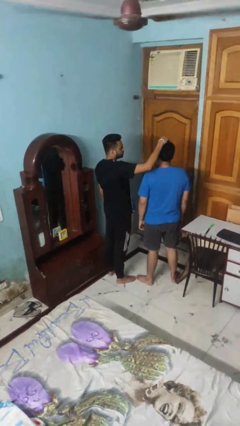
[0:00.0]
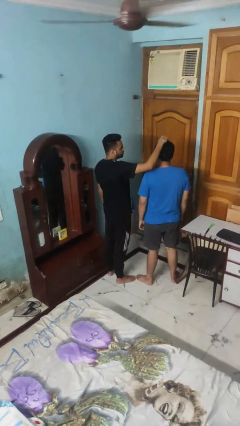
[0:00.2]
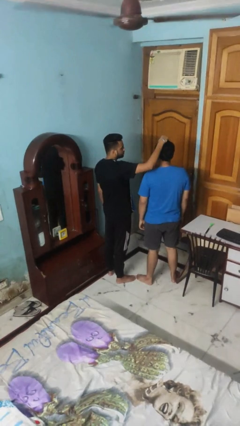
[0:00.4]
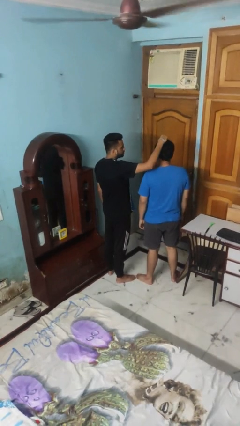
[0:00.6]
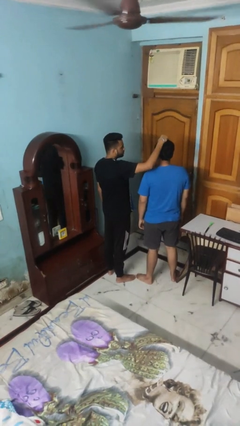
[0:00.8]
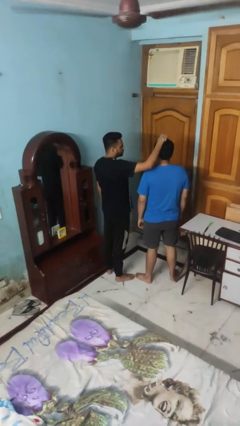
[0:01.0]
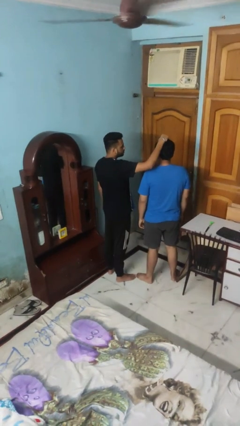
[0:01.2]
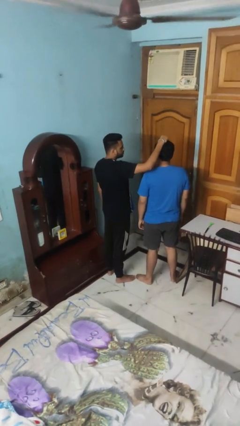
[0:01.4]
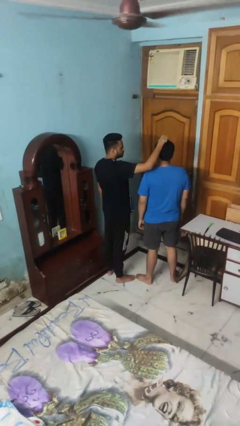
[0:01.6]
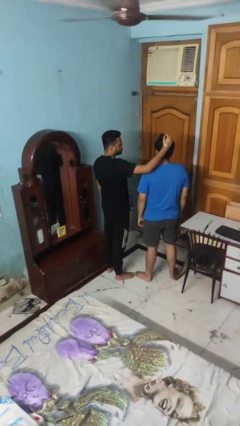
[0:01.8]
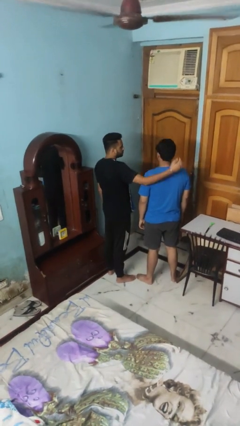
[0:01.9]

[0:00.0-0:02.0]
person grabs person by hair

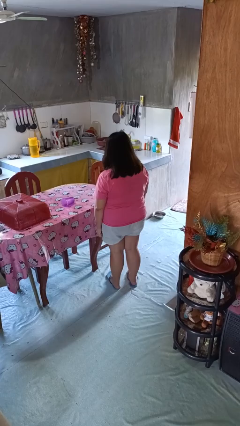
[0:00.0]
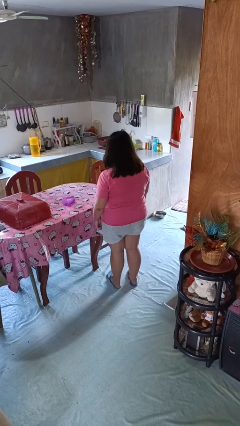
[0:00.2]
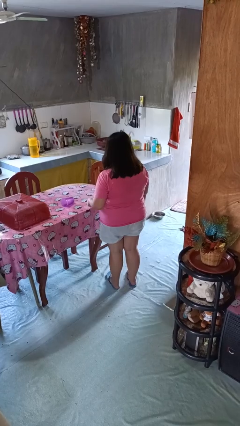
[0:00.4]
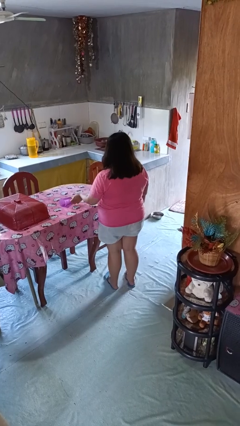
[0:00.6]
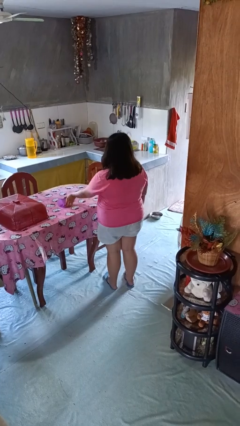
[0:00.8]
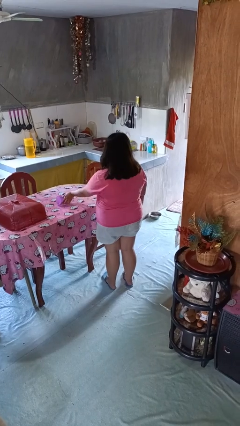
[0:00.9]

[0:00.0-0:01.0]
person sets upright glass

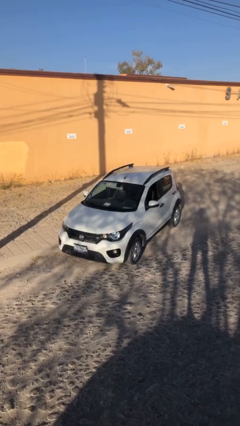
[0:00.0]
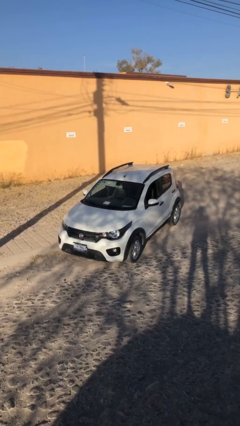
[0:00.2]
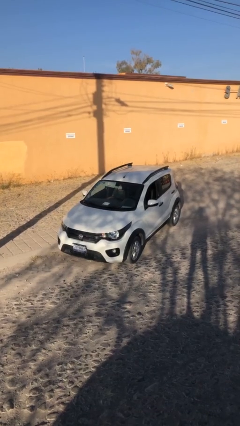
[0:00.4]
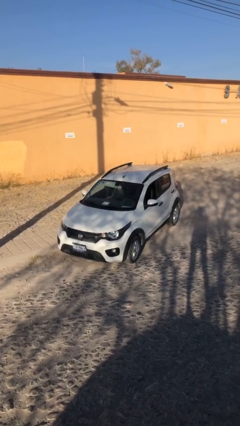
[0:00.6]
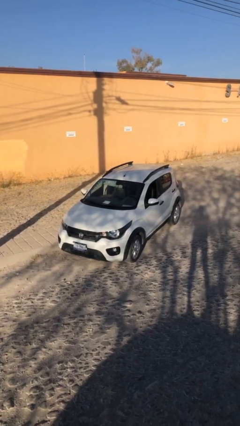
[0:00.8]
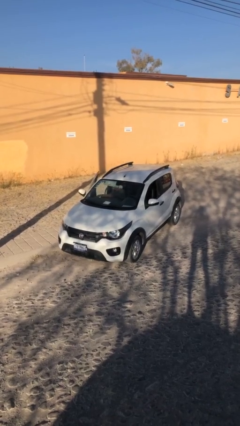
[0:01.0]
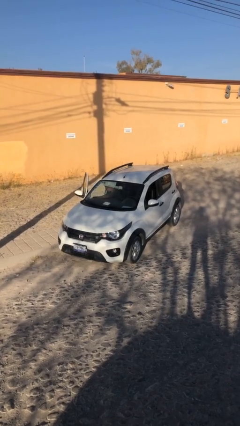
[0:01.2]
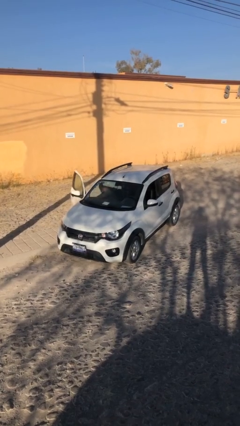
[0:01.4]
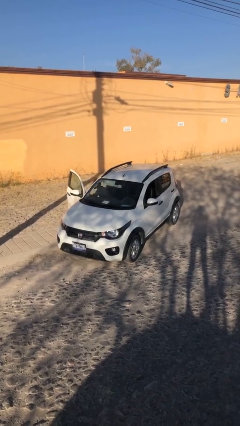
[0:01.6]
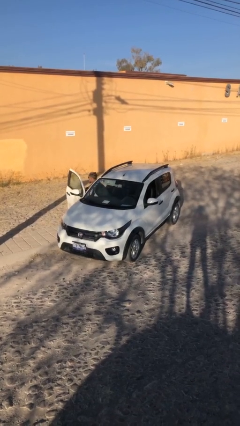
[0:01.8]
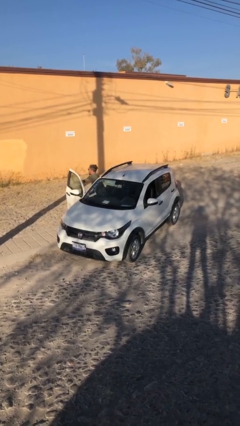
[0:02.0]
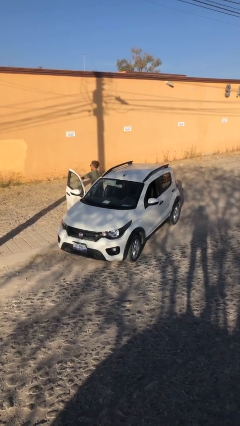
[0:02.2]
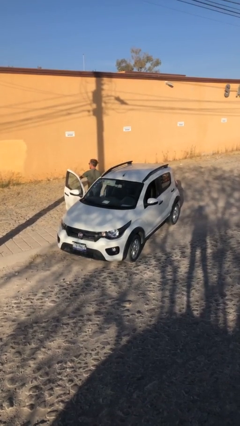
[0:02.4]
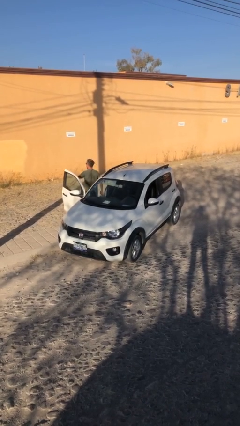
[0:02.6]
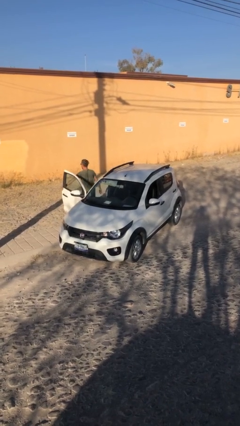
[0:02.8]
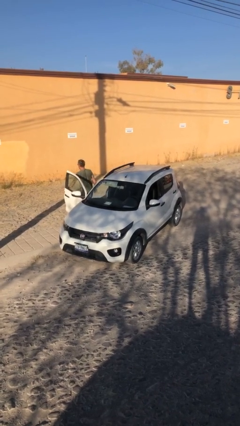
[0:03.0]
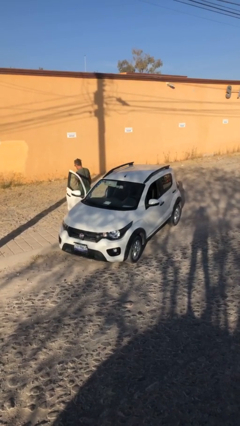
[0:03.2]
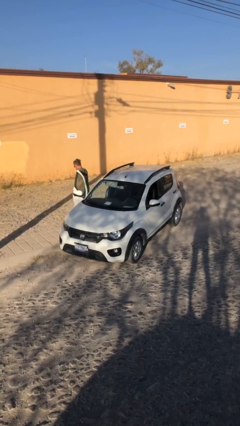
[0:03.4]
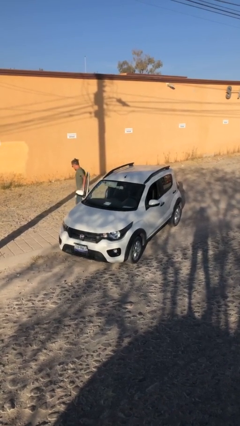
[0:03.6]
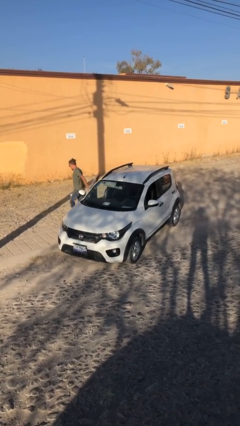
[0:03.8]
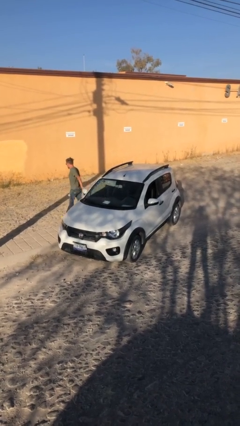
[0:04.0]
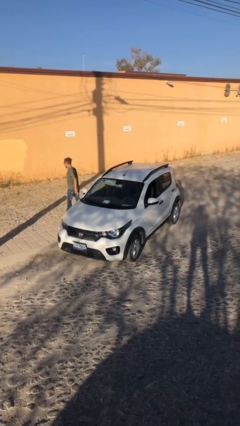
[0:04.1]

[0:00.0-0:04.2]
car drops off person

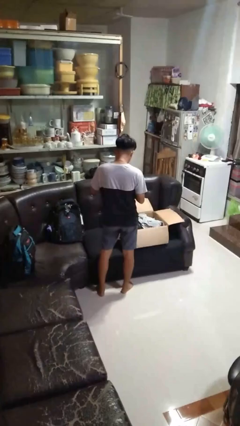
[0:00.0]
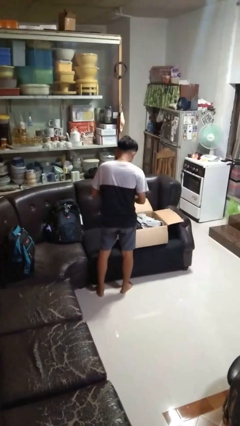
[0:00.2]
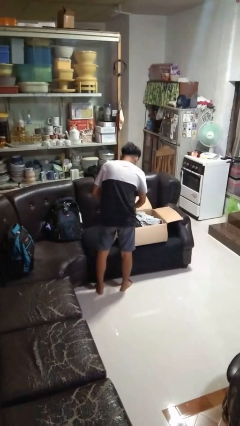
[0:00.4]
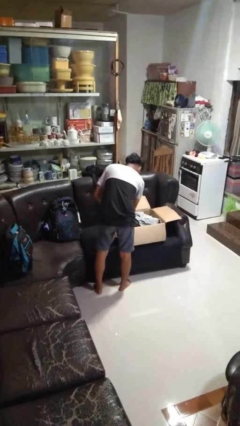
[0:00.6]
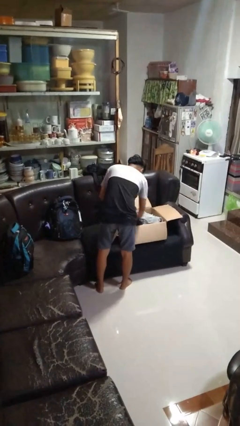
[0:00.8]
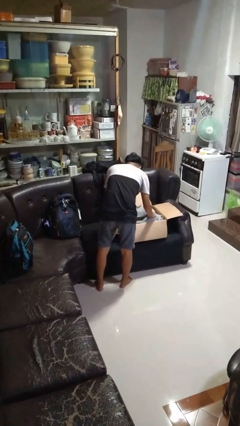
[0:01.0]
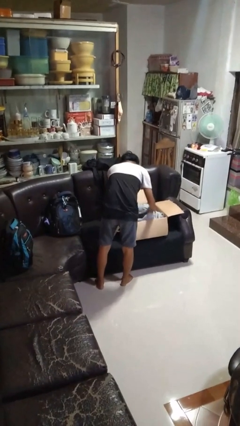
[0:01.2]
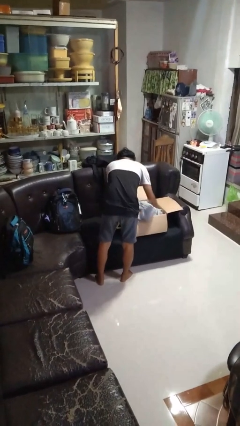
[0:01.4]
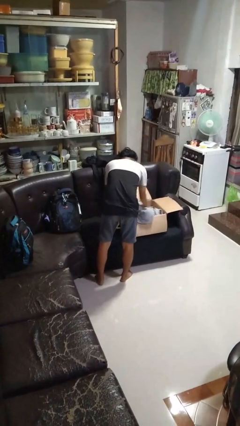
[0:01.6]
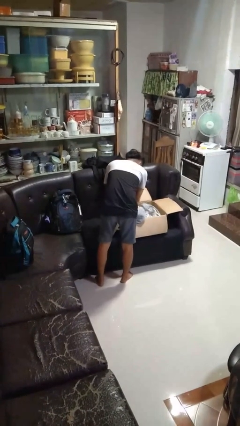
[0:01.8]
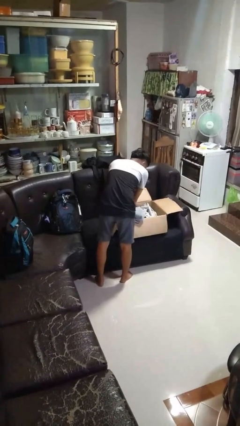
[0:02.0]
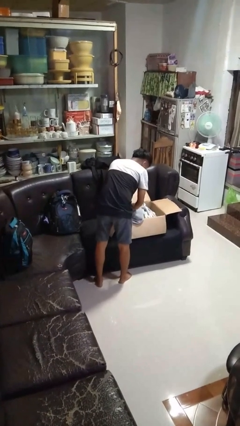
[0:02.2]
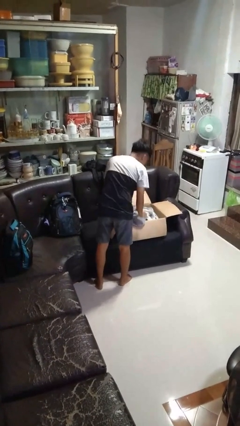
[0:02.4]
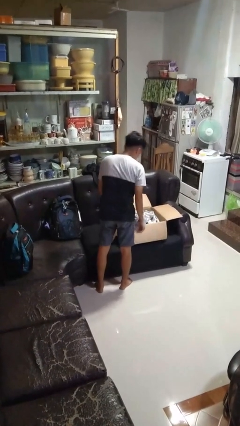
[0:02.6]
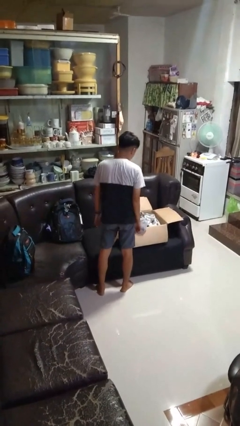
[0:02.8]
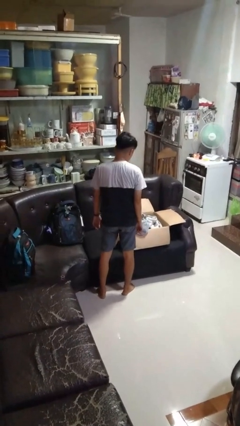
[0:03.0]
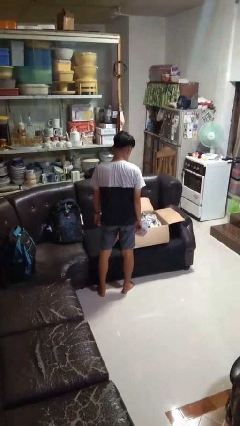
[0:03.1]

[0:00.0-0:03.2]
person searches in box

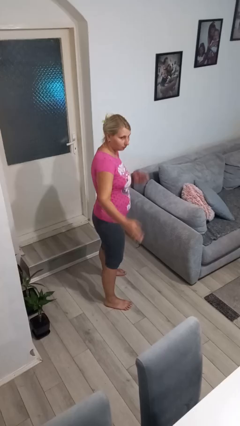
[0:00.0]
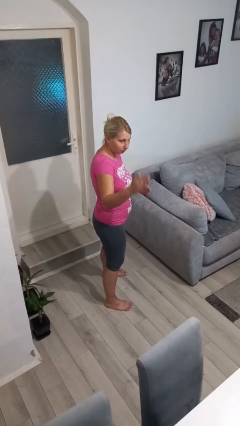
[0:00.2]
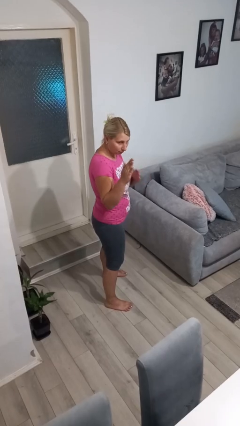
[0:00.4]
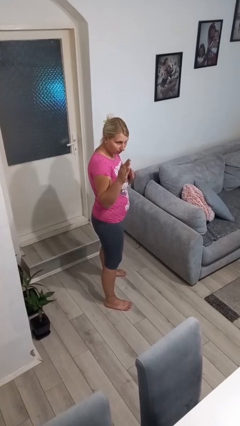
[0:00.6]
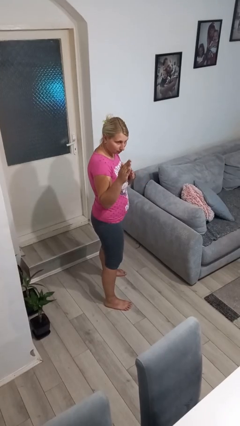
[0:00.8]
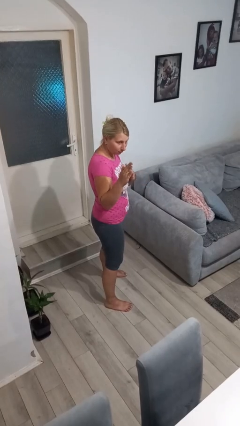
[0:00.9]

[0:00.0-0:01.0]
person karate chop

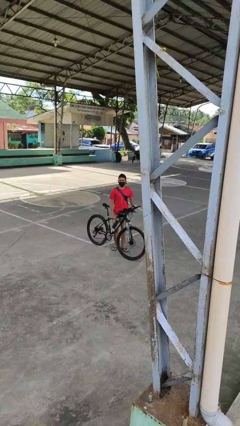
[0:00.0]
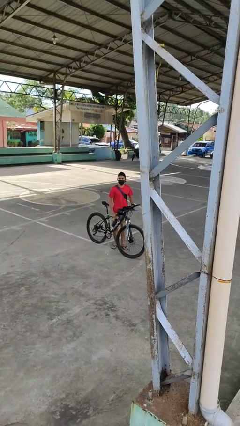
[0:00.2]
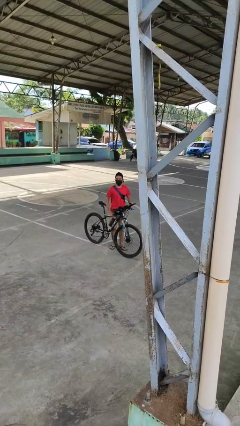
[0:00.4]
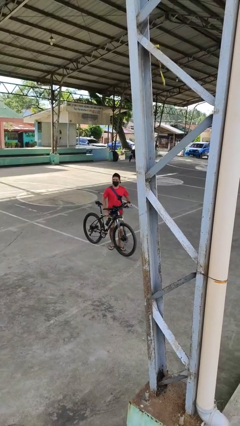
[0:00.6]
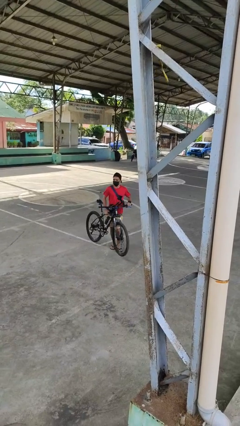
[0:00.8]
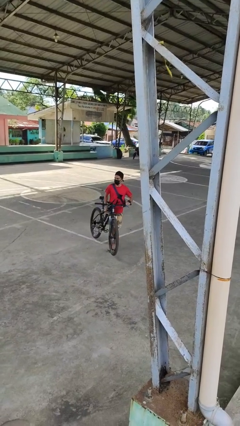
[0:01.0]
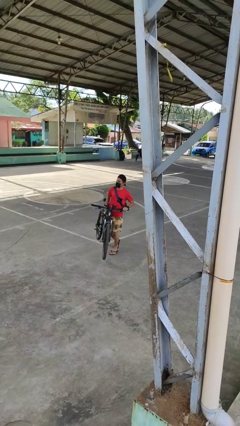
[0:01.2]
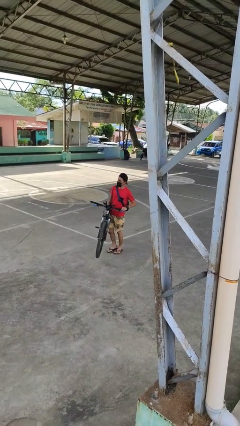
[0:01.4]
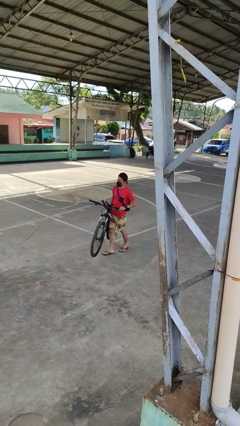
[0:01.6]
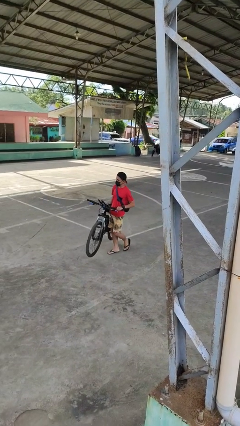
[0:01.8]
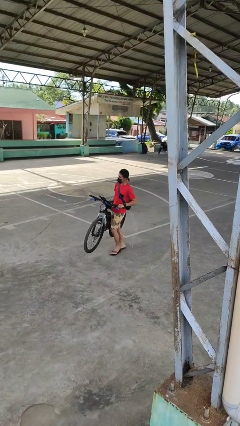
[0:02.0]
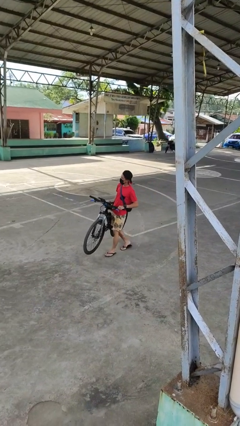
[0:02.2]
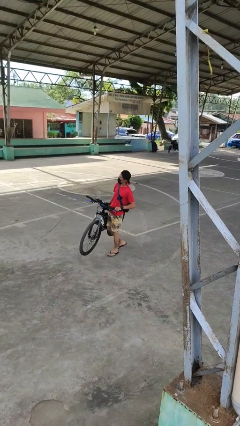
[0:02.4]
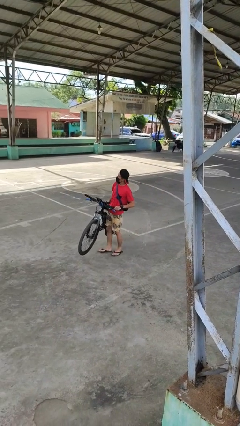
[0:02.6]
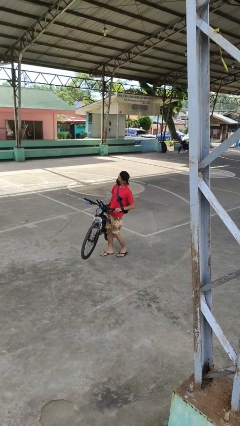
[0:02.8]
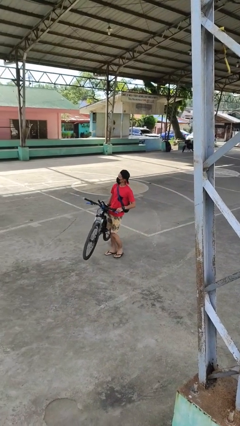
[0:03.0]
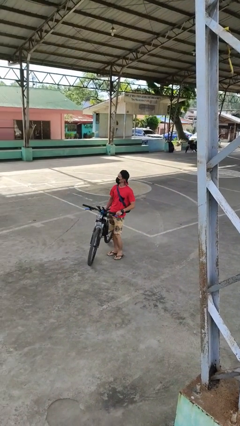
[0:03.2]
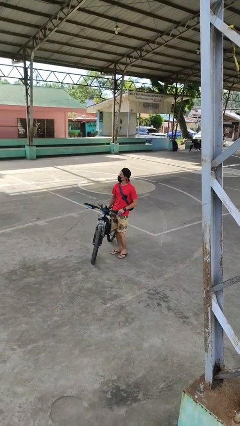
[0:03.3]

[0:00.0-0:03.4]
person carries bicycle

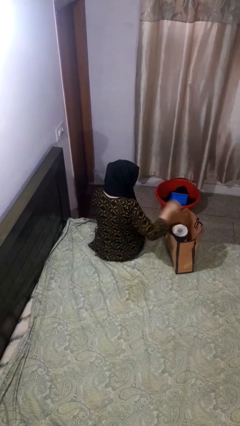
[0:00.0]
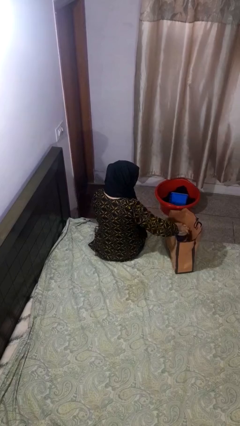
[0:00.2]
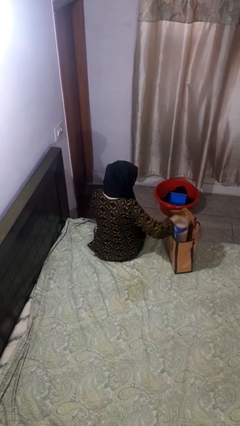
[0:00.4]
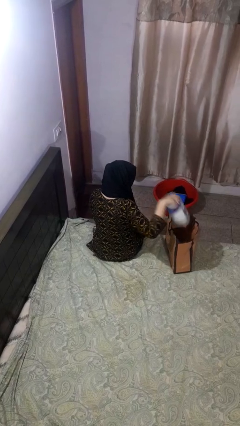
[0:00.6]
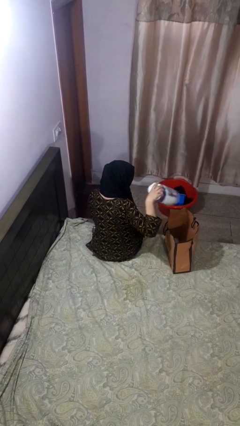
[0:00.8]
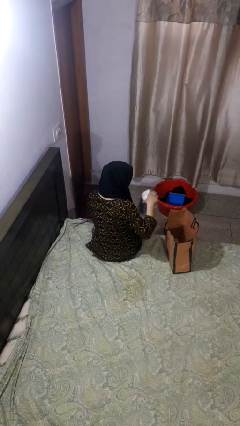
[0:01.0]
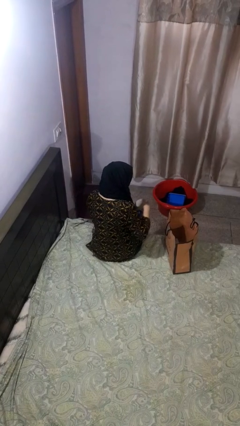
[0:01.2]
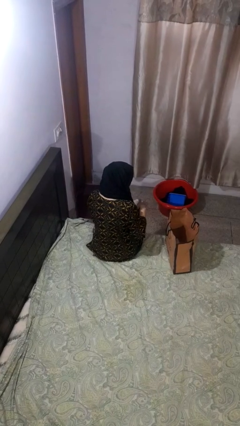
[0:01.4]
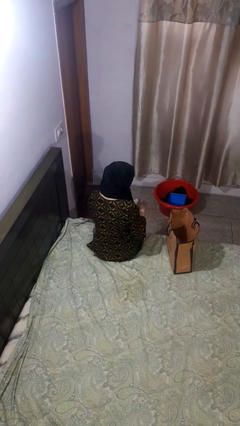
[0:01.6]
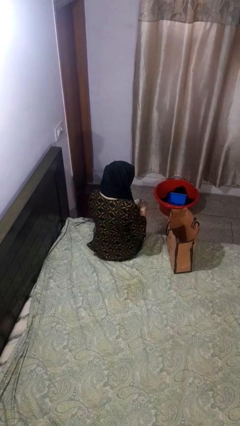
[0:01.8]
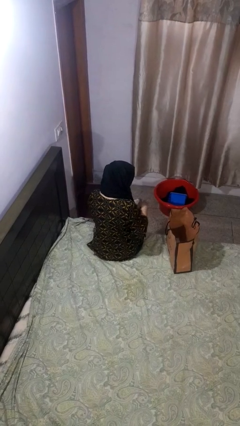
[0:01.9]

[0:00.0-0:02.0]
person takes object from bag

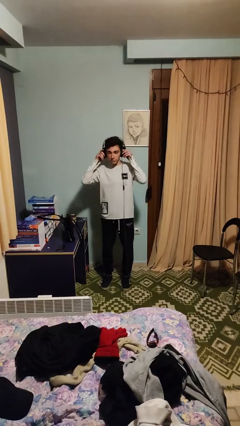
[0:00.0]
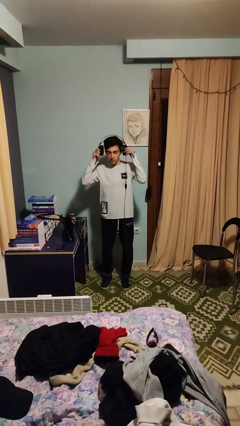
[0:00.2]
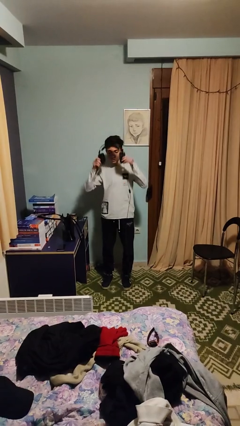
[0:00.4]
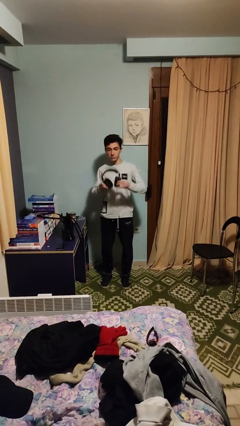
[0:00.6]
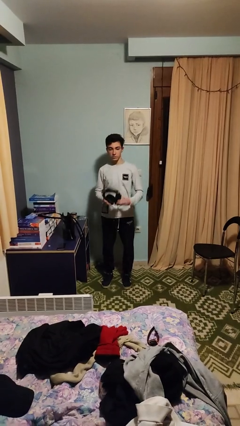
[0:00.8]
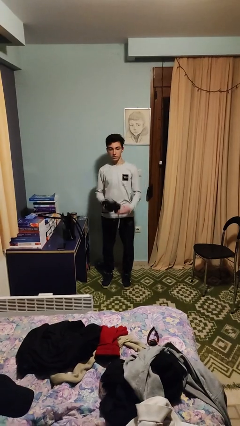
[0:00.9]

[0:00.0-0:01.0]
person takes off headphones
